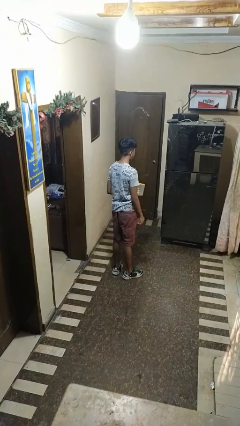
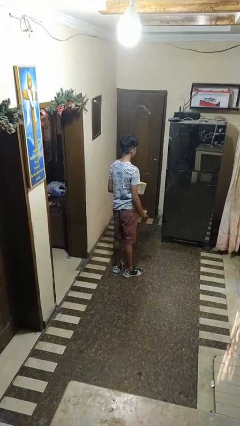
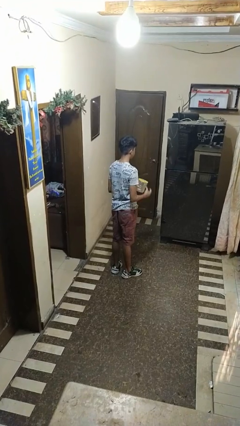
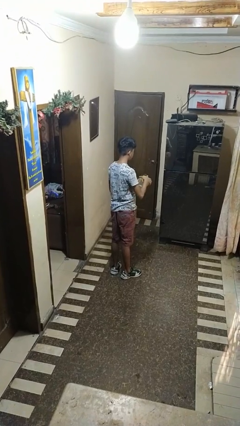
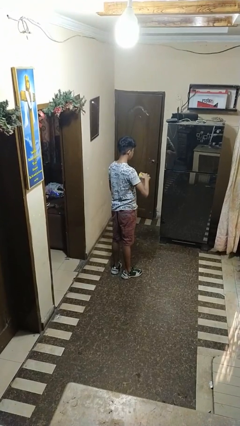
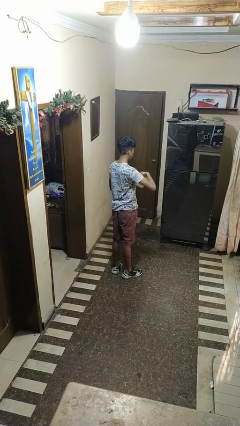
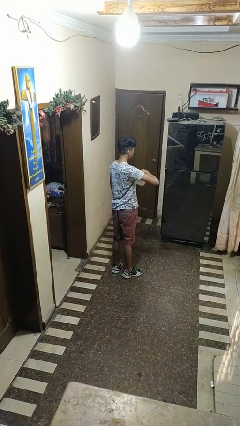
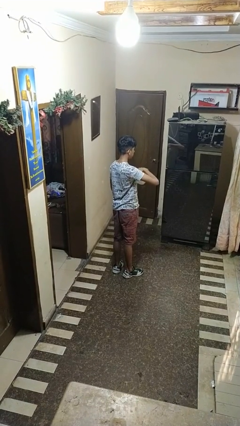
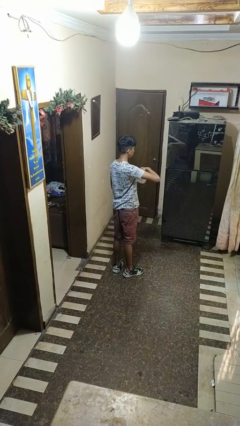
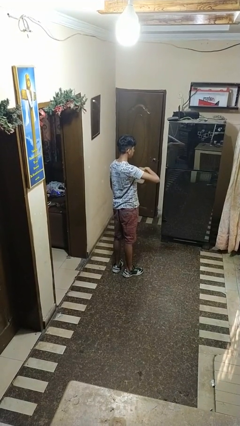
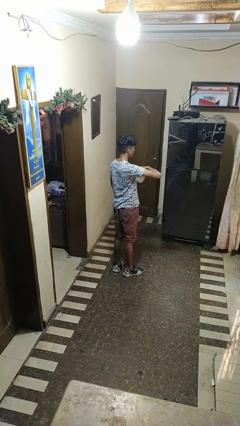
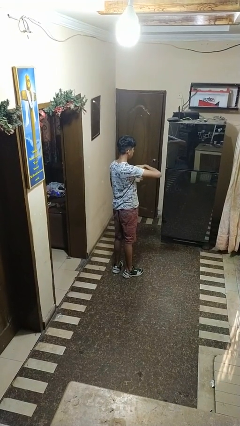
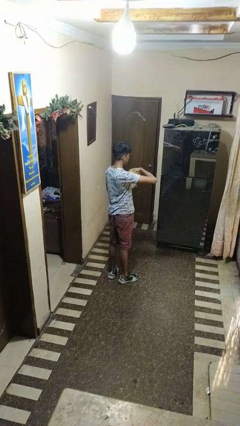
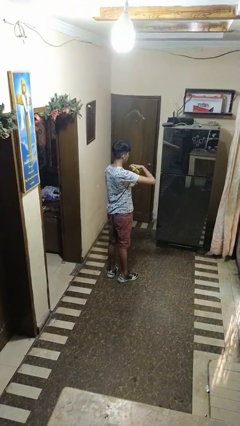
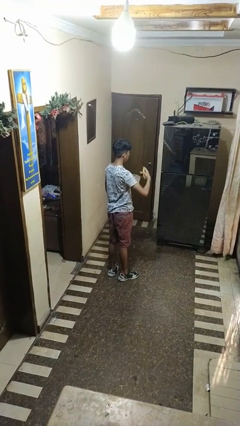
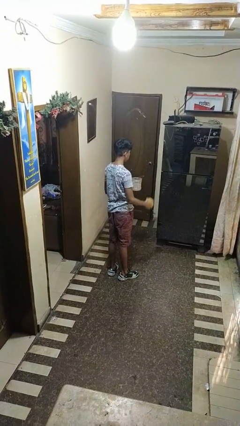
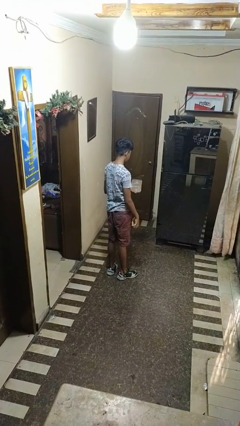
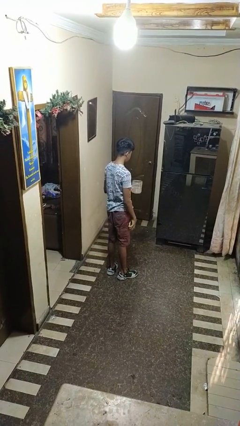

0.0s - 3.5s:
person opens jar

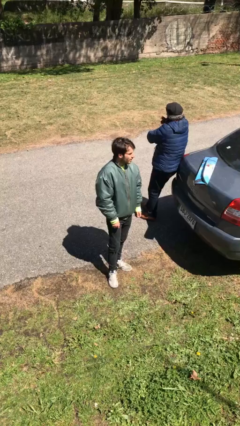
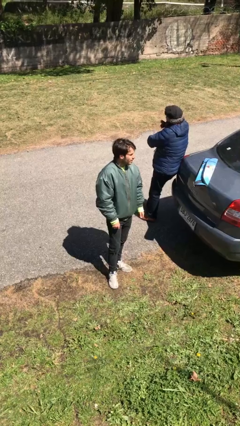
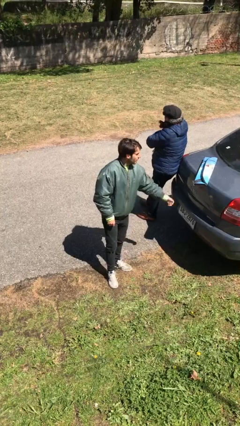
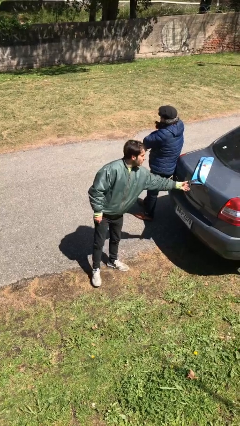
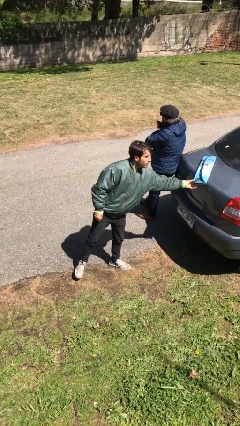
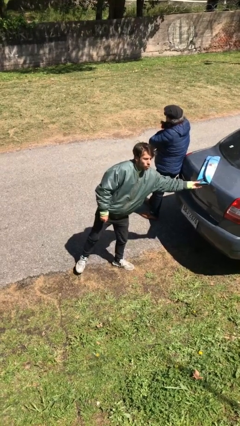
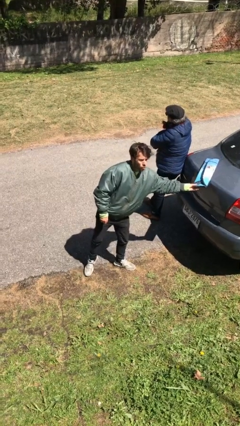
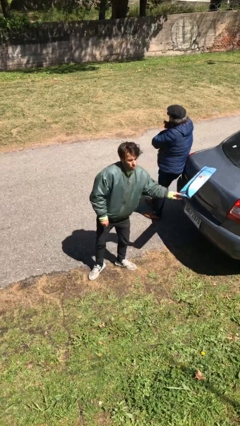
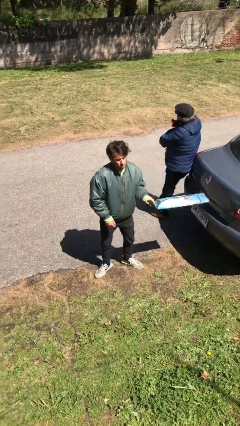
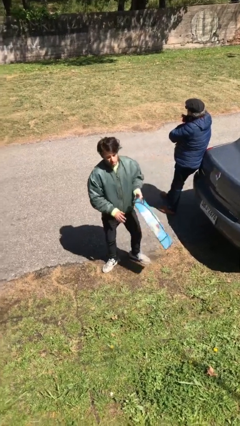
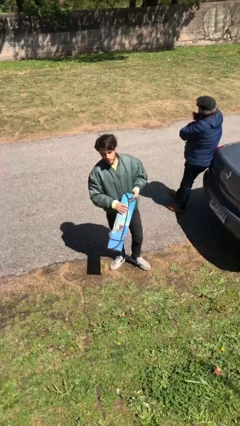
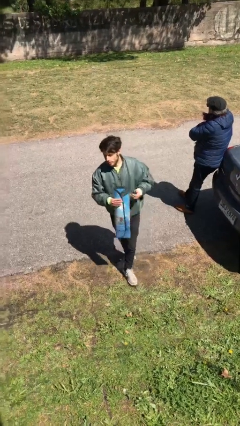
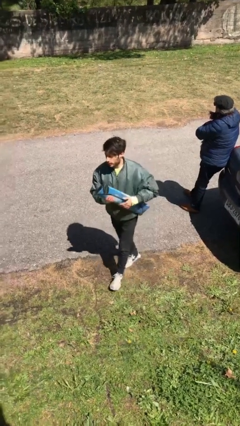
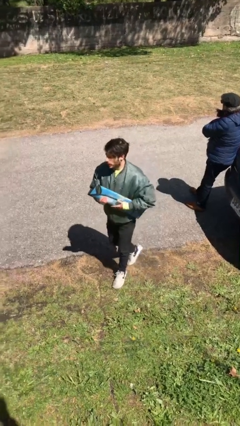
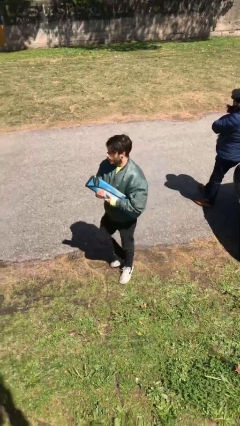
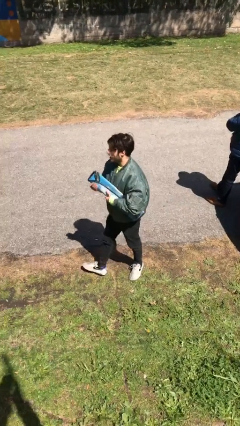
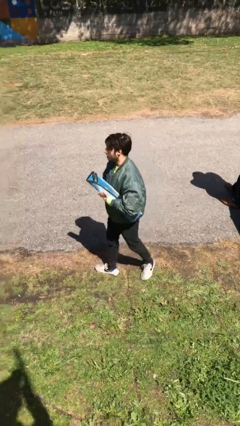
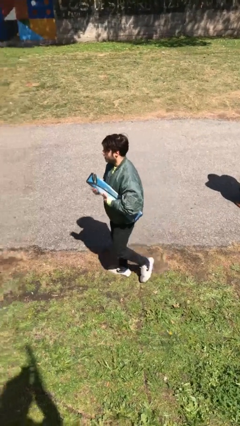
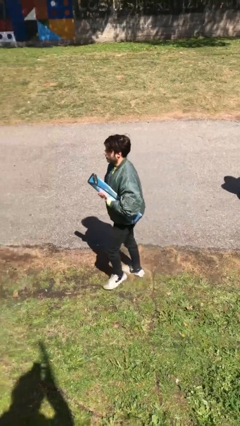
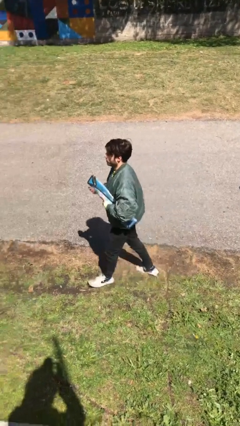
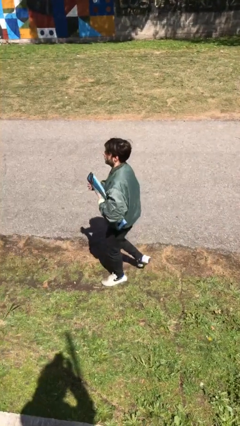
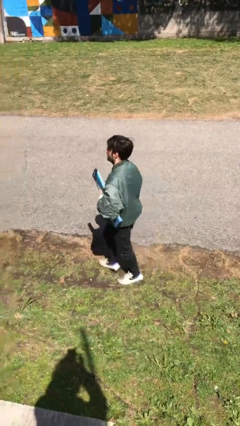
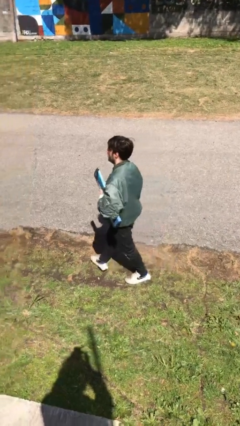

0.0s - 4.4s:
person steals object from person

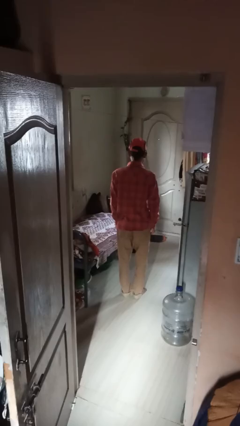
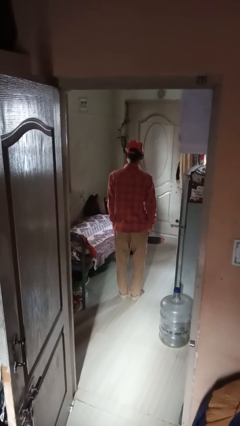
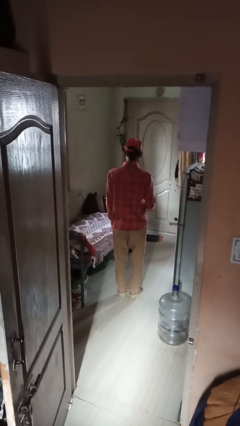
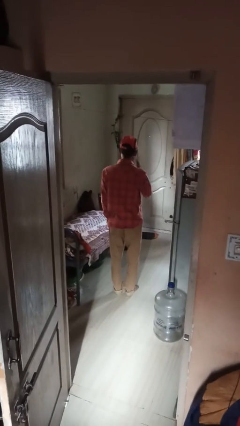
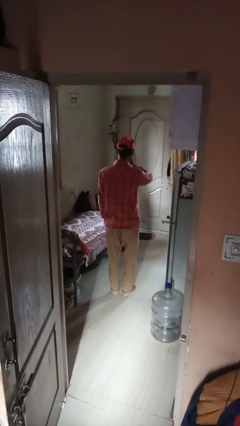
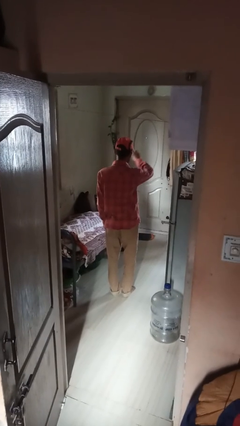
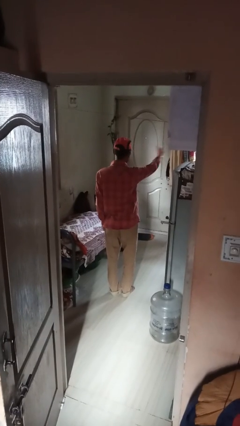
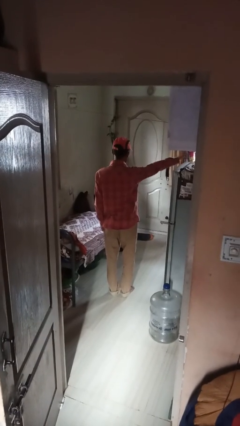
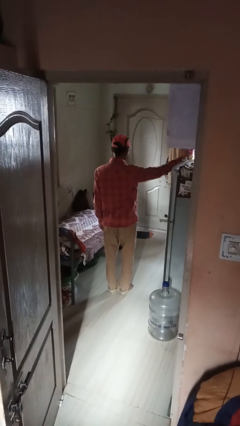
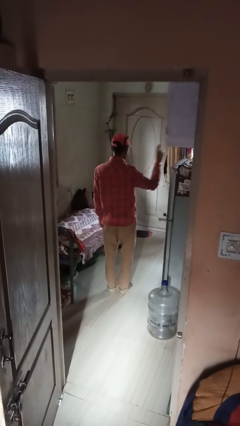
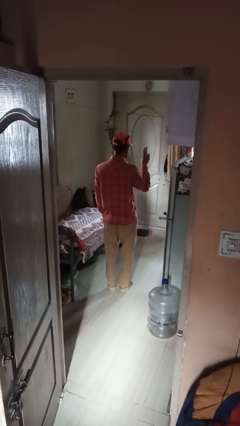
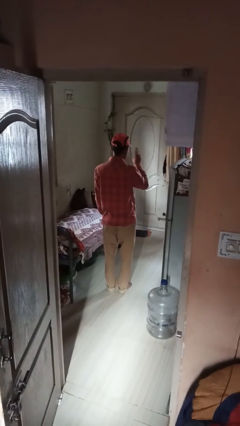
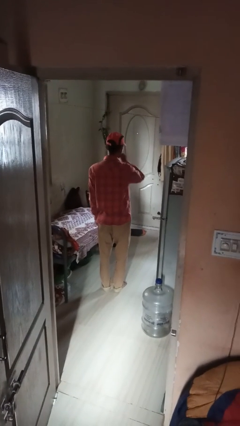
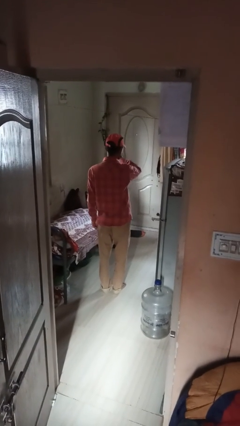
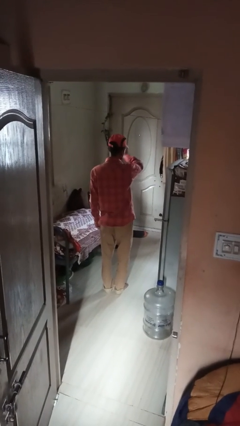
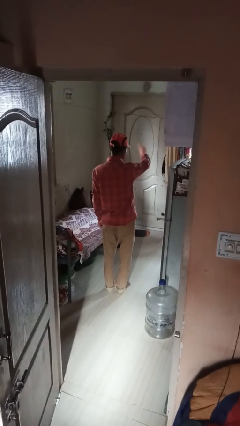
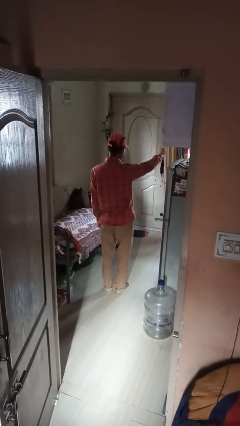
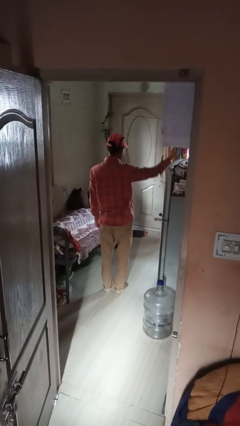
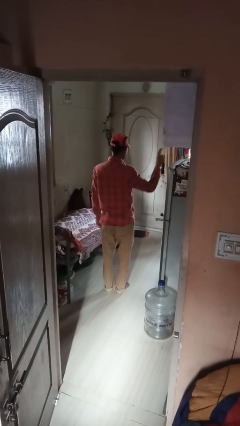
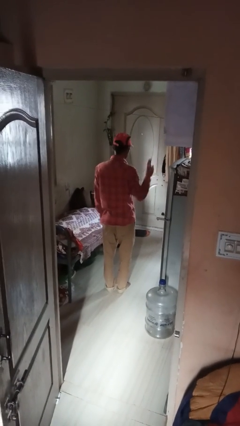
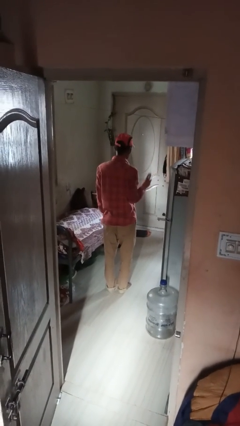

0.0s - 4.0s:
person gestures swipe right

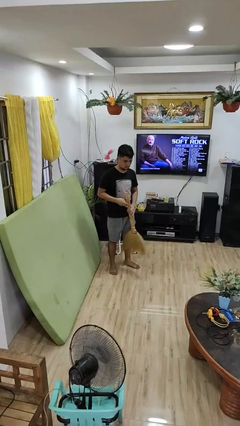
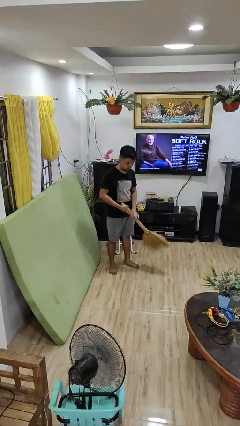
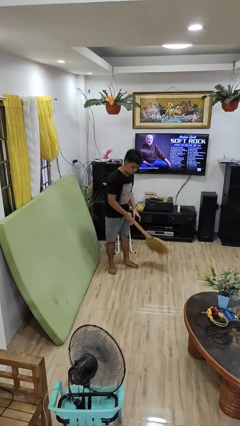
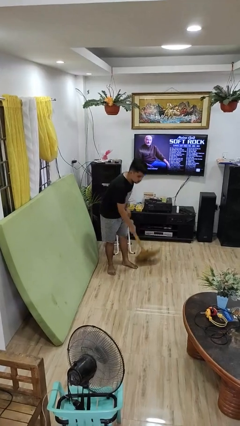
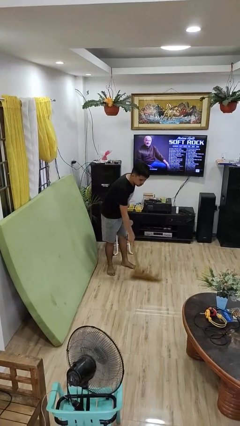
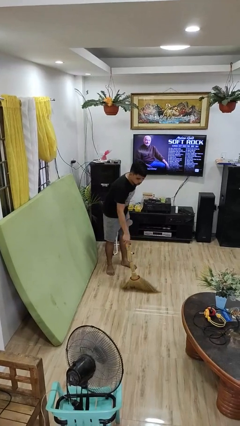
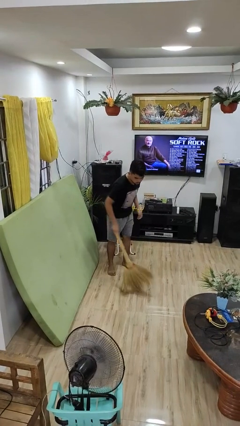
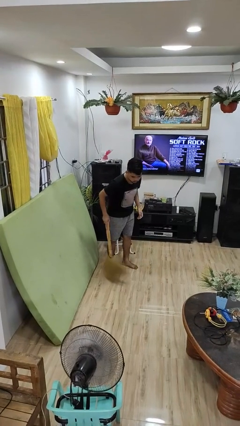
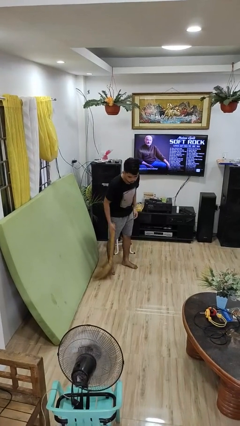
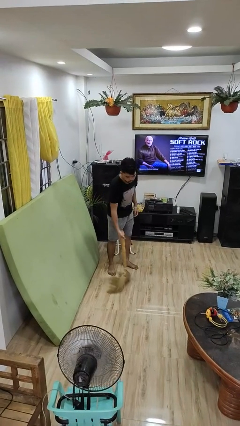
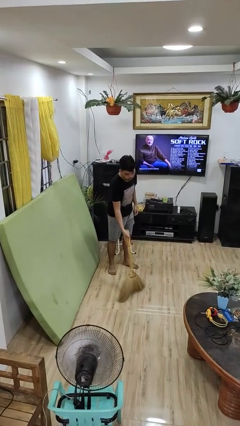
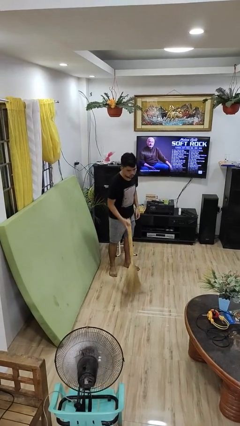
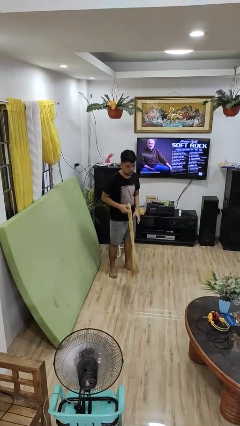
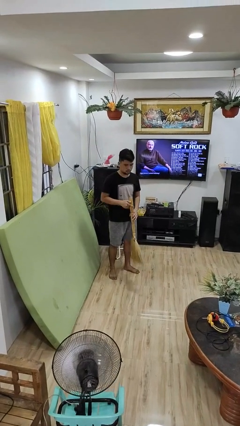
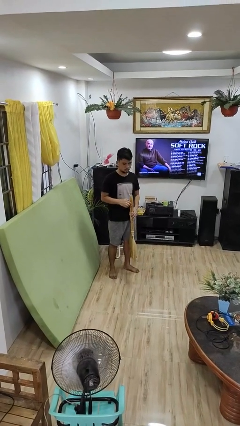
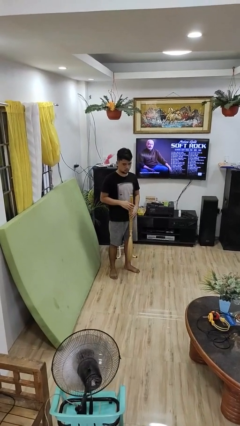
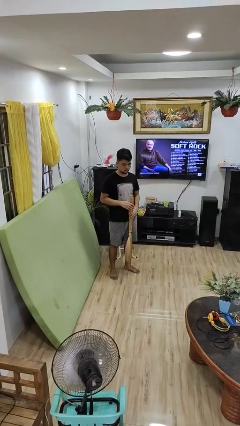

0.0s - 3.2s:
person sweeps floor

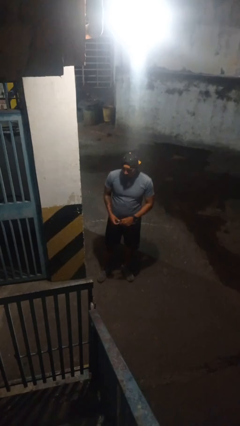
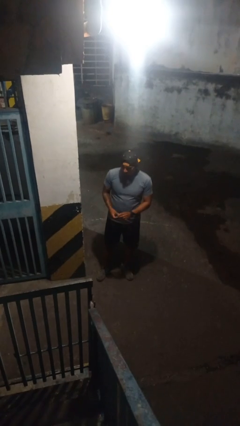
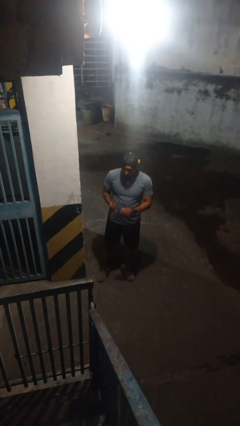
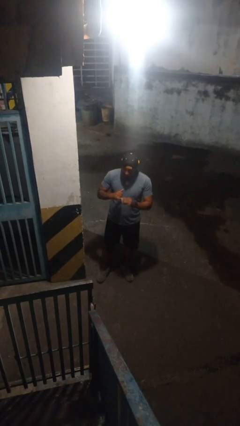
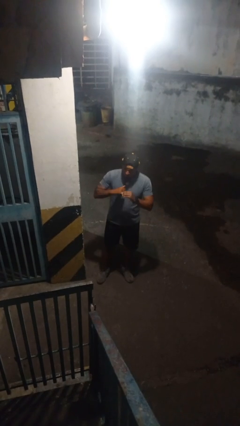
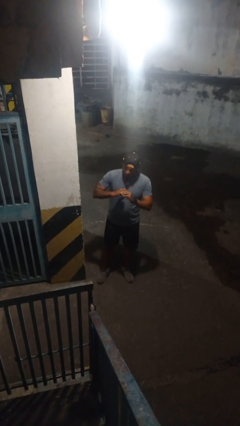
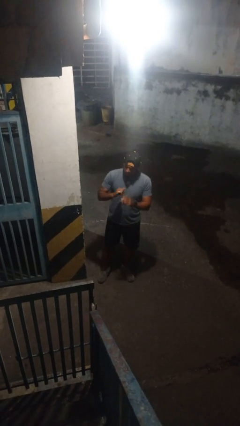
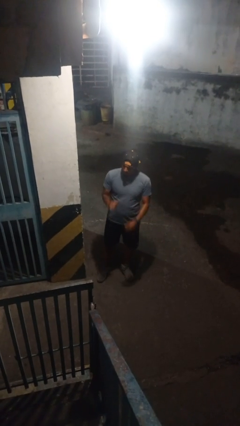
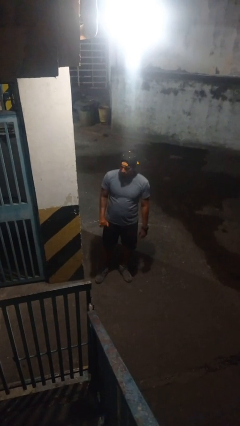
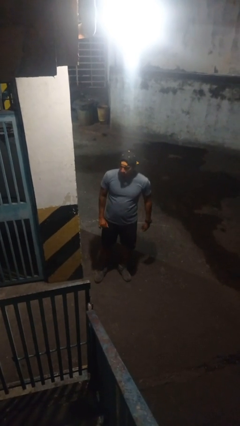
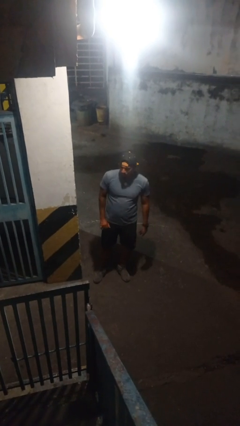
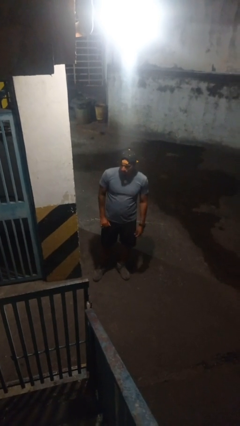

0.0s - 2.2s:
person puts on ring
